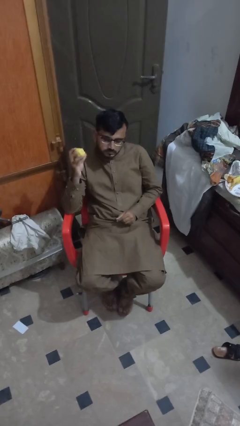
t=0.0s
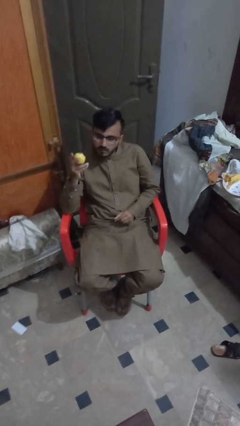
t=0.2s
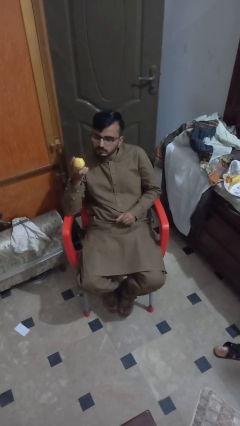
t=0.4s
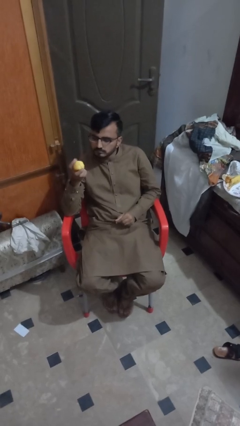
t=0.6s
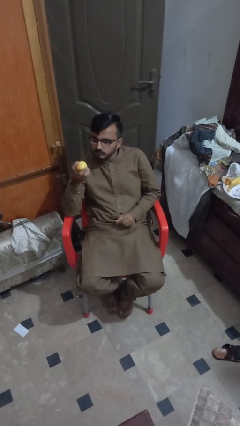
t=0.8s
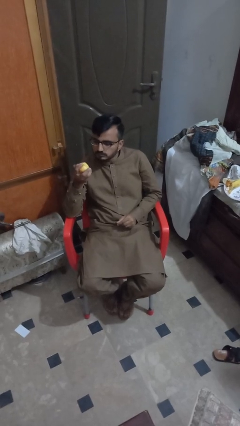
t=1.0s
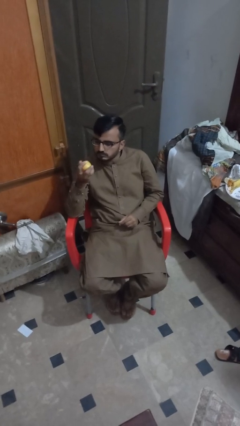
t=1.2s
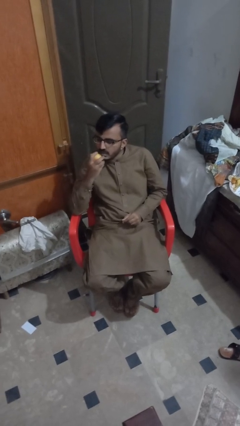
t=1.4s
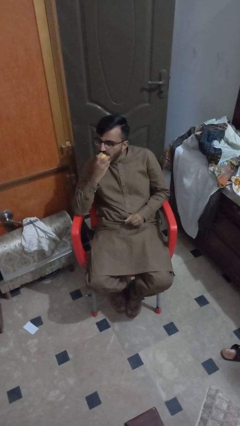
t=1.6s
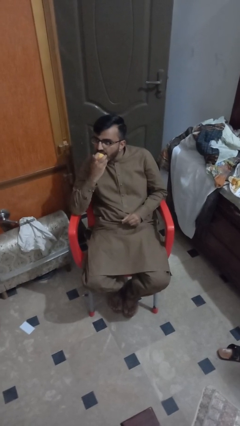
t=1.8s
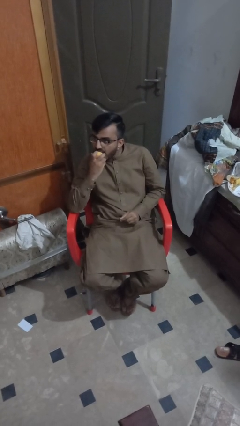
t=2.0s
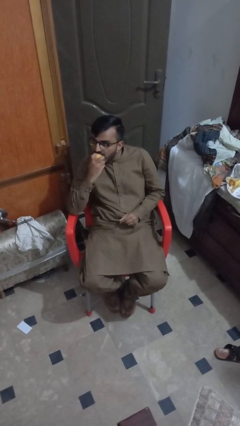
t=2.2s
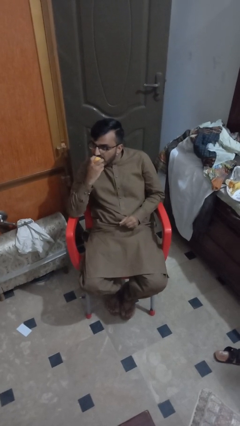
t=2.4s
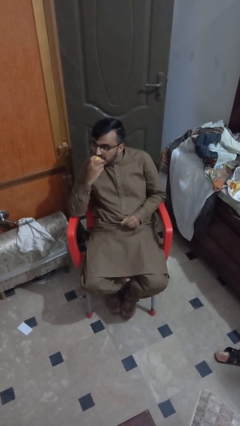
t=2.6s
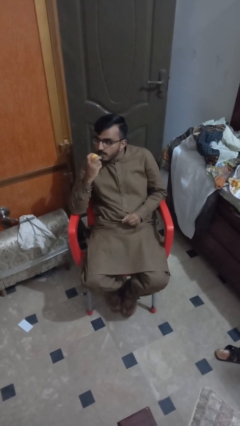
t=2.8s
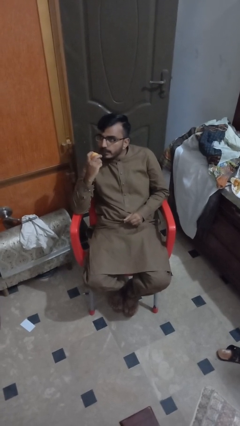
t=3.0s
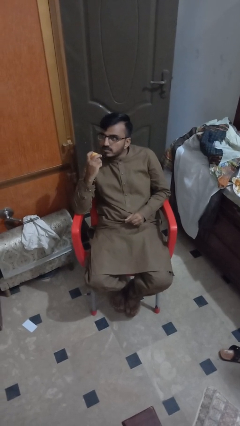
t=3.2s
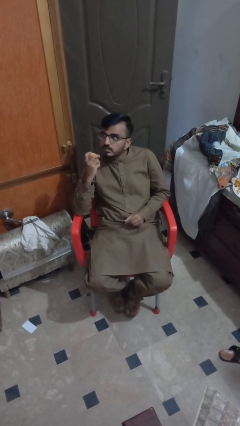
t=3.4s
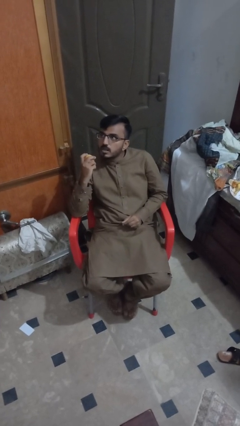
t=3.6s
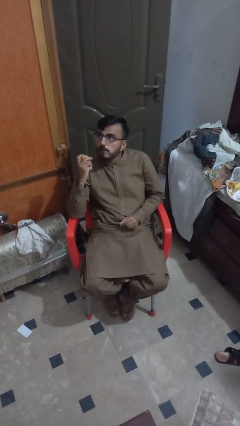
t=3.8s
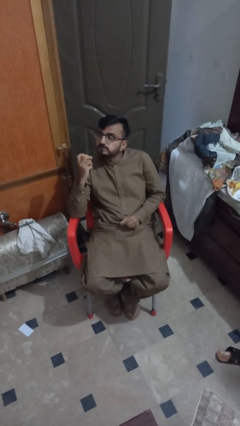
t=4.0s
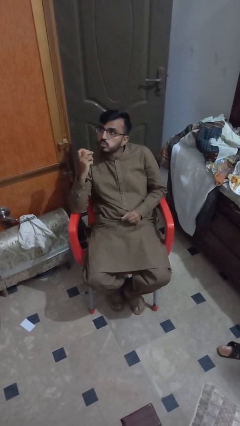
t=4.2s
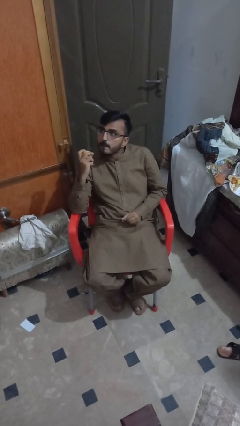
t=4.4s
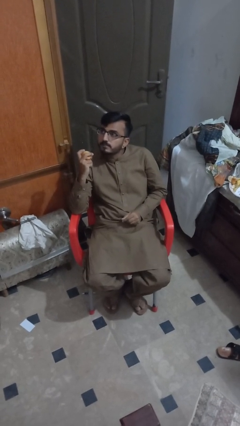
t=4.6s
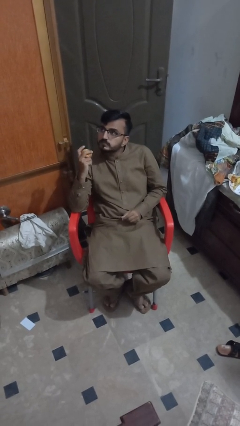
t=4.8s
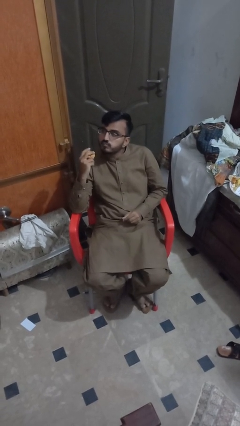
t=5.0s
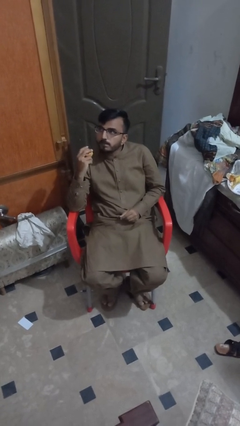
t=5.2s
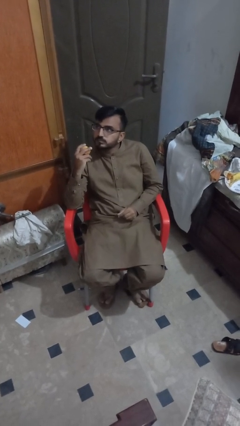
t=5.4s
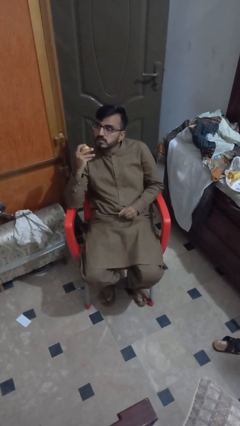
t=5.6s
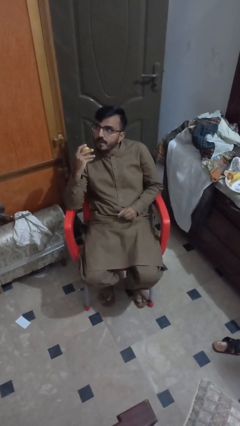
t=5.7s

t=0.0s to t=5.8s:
person eats apple

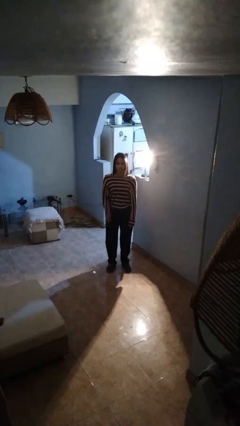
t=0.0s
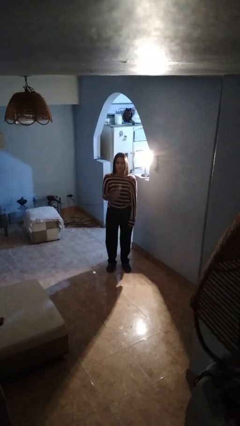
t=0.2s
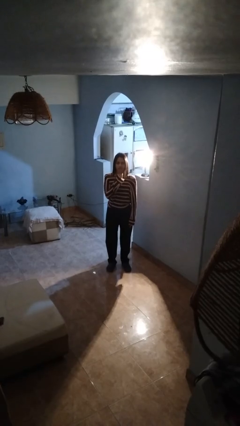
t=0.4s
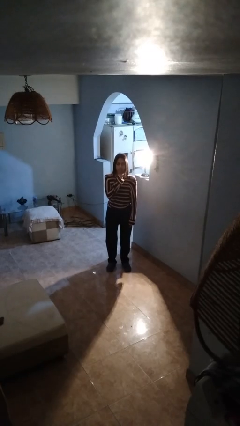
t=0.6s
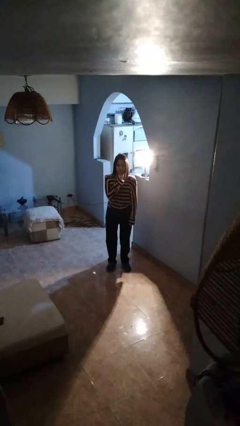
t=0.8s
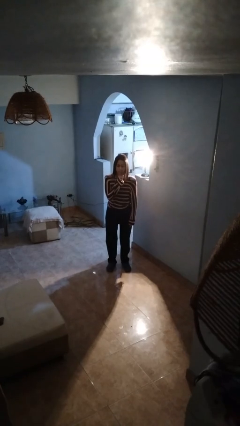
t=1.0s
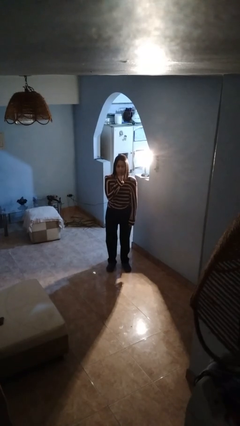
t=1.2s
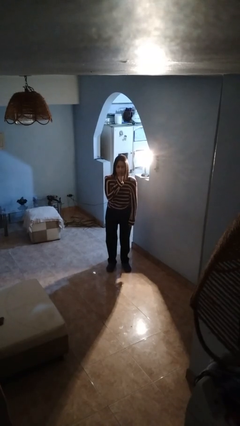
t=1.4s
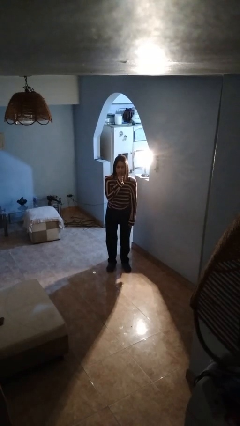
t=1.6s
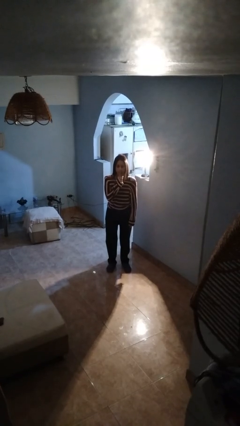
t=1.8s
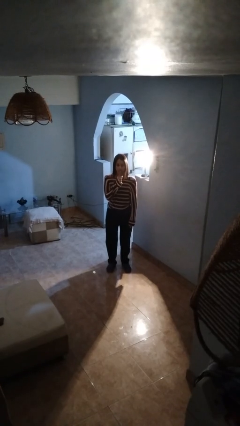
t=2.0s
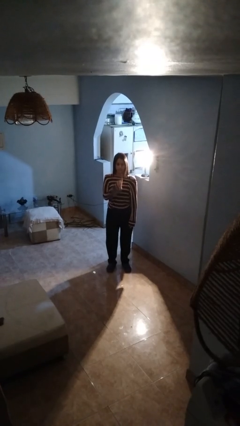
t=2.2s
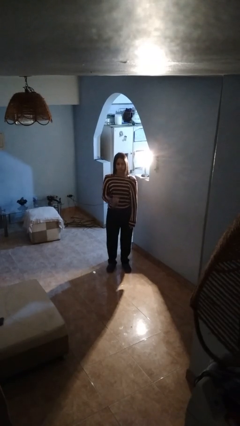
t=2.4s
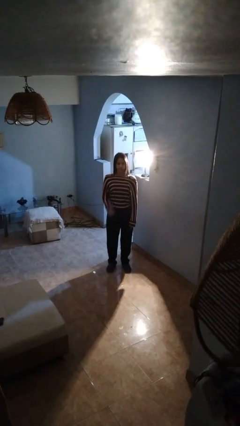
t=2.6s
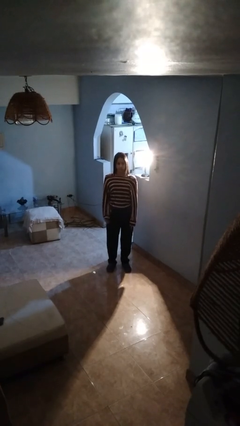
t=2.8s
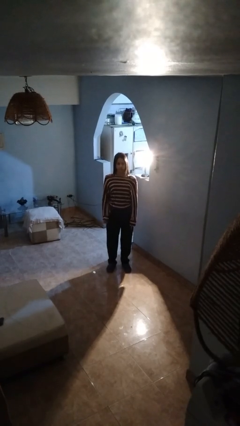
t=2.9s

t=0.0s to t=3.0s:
person gestures be quiet

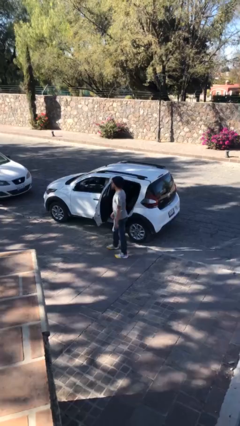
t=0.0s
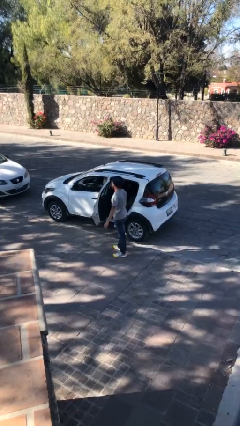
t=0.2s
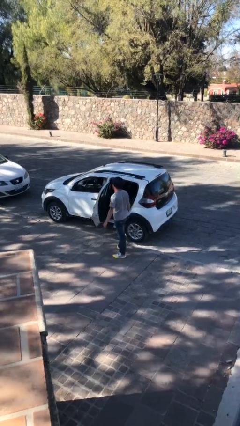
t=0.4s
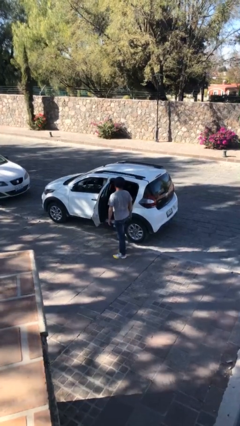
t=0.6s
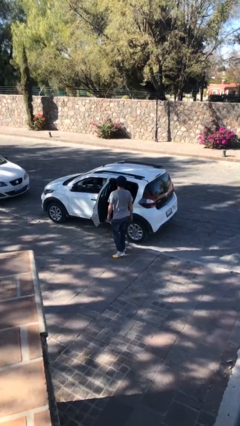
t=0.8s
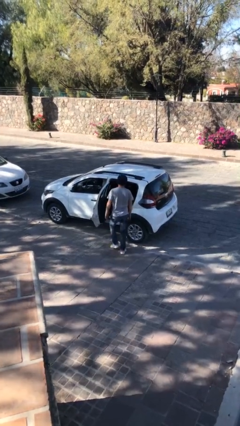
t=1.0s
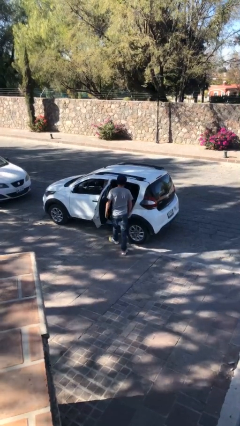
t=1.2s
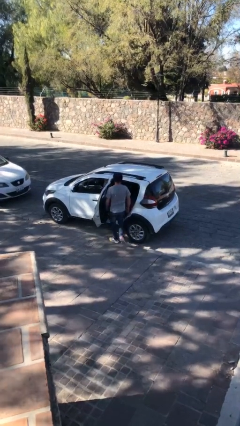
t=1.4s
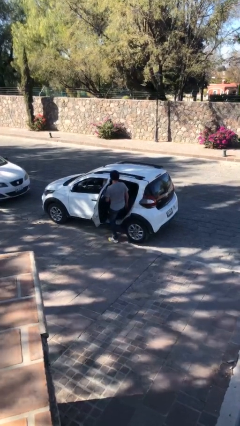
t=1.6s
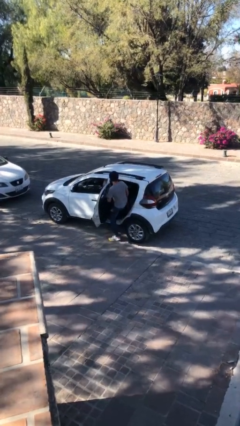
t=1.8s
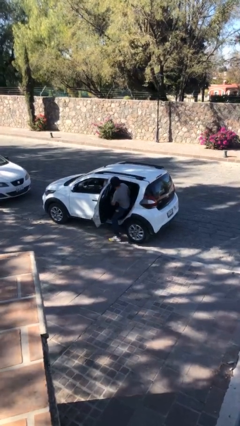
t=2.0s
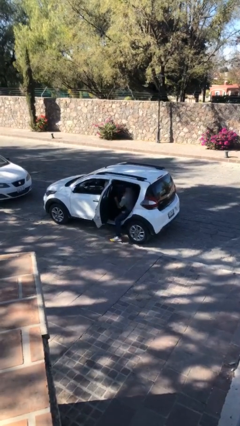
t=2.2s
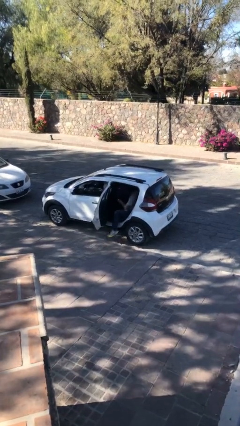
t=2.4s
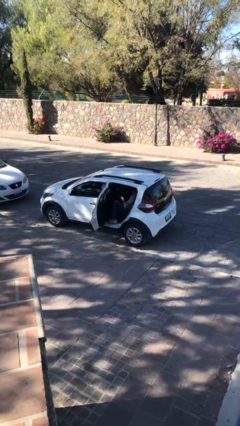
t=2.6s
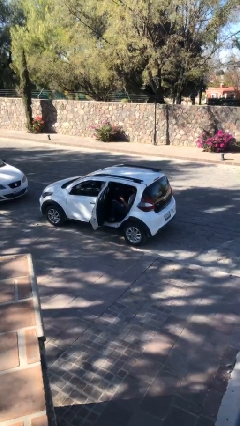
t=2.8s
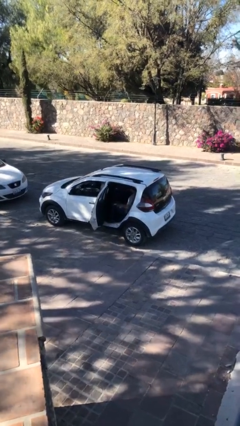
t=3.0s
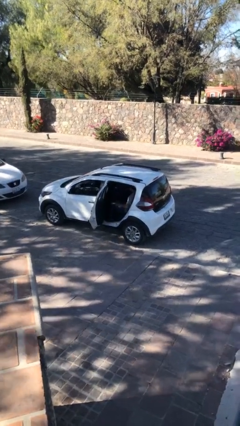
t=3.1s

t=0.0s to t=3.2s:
person enters car

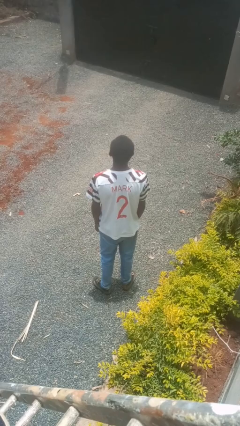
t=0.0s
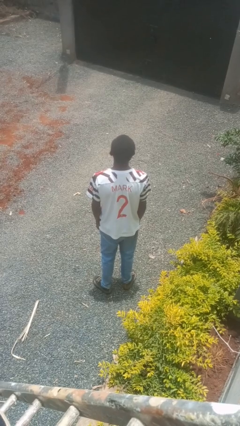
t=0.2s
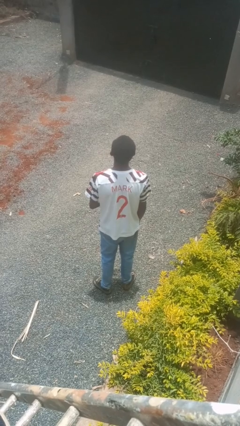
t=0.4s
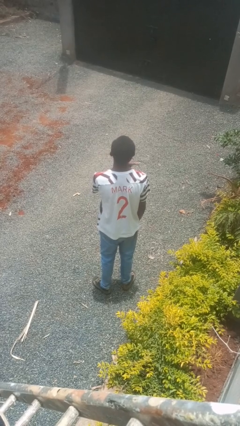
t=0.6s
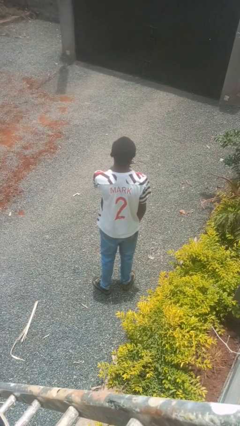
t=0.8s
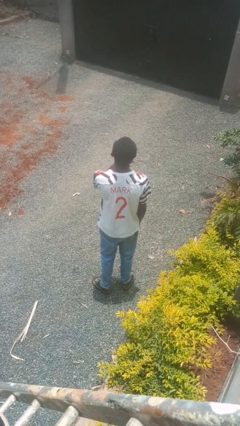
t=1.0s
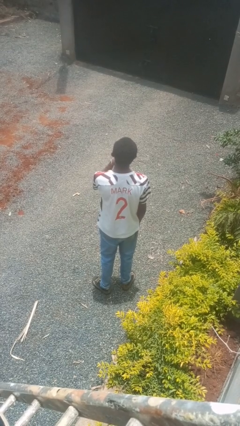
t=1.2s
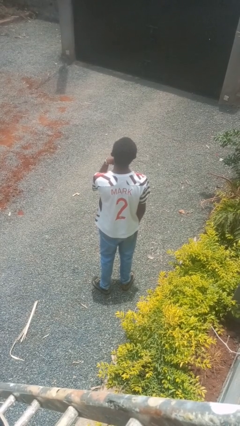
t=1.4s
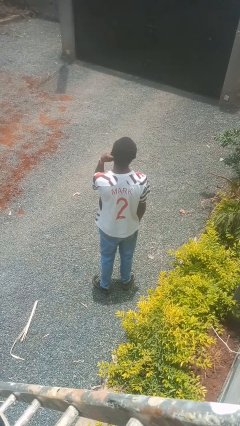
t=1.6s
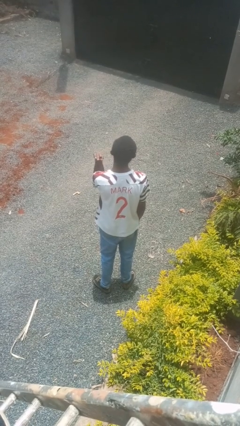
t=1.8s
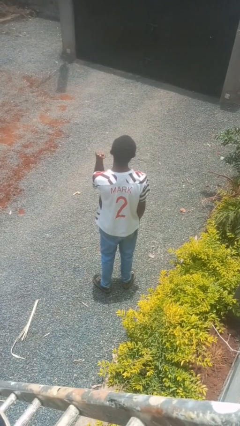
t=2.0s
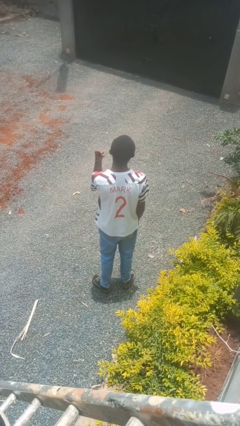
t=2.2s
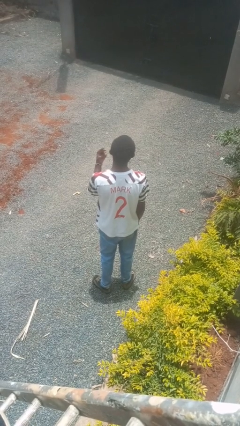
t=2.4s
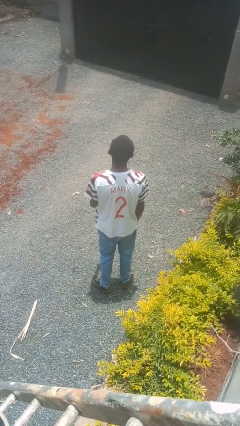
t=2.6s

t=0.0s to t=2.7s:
person gestures cut

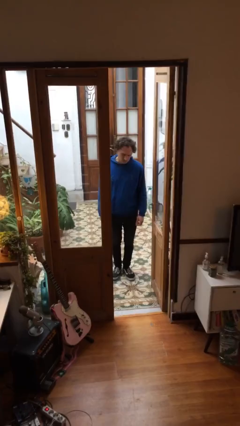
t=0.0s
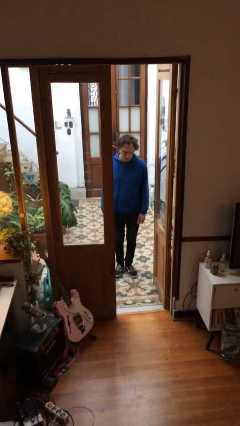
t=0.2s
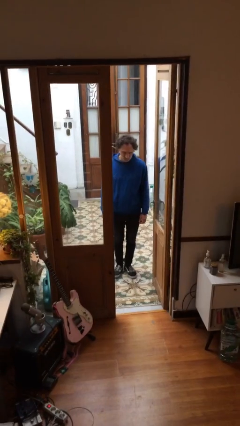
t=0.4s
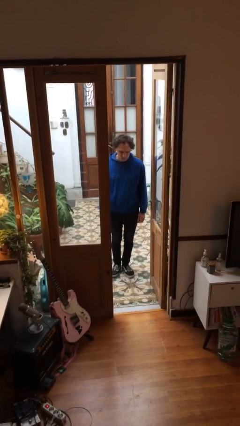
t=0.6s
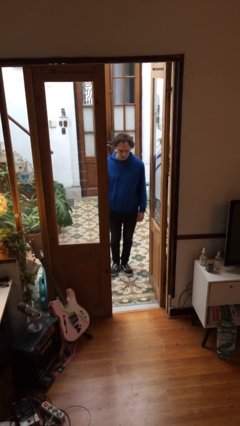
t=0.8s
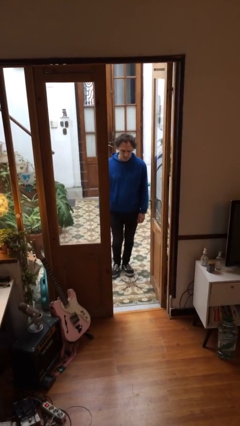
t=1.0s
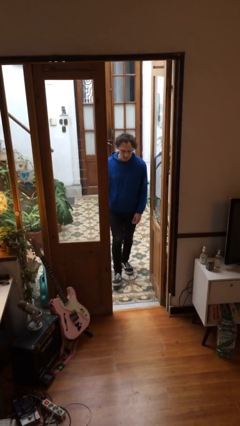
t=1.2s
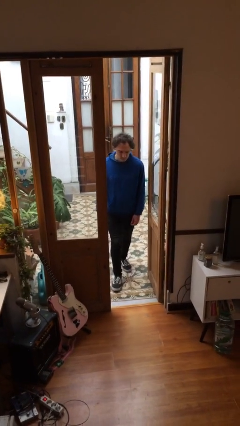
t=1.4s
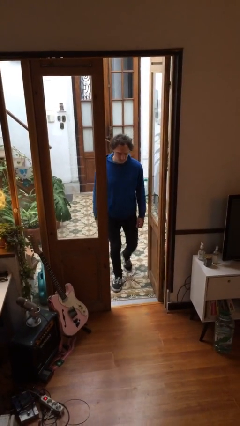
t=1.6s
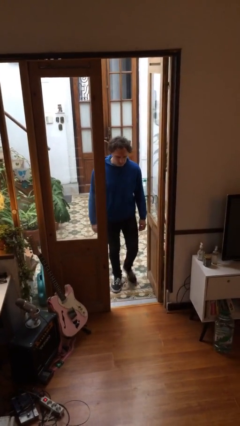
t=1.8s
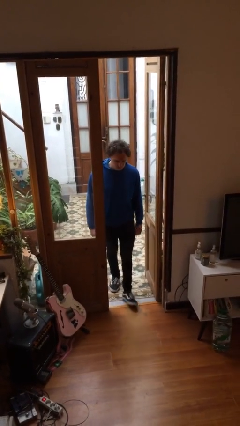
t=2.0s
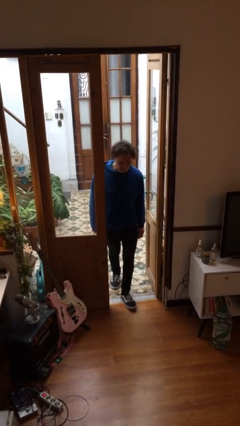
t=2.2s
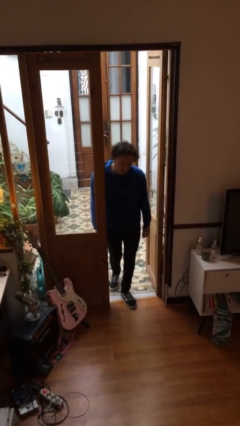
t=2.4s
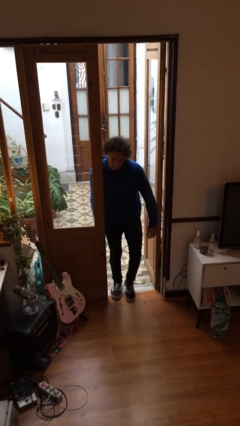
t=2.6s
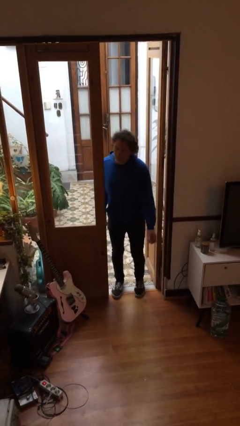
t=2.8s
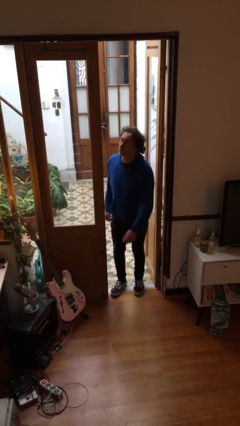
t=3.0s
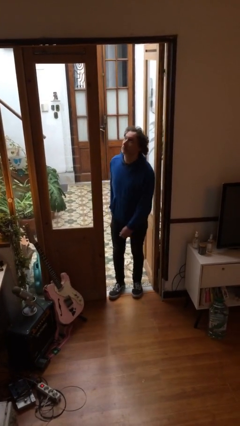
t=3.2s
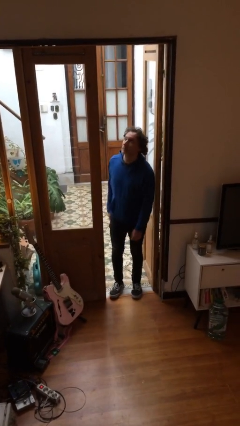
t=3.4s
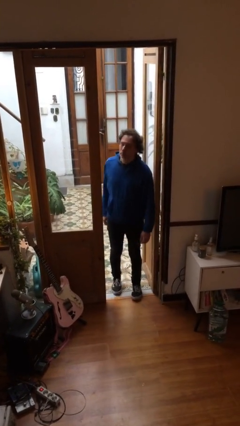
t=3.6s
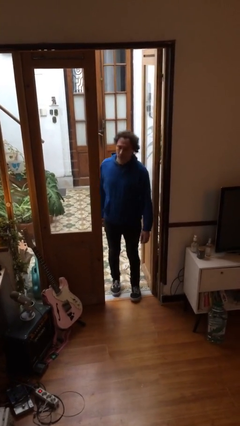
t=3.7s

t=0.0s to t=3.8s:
person bumps into wall
